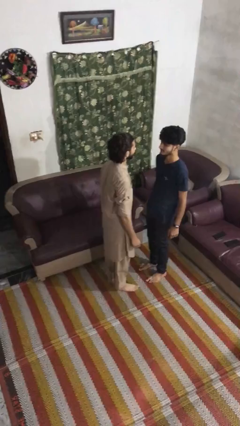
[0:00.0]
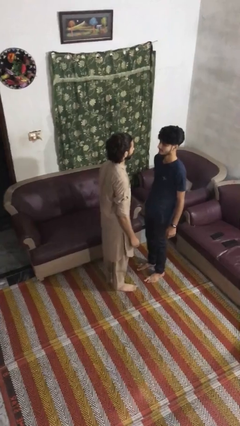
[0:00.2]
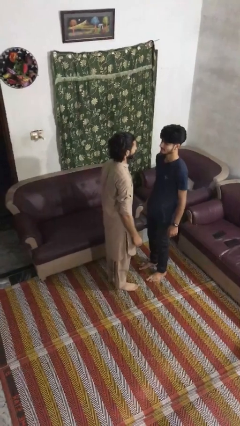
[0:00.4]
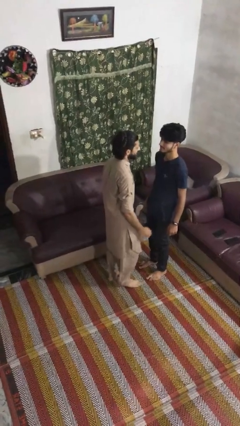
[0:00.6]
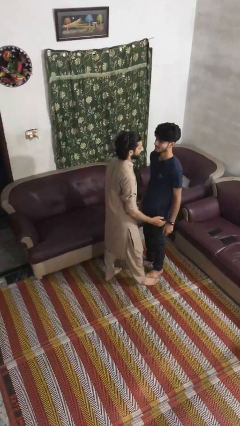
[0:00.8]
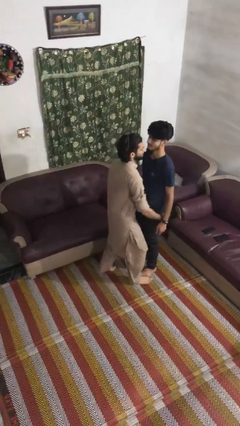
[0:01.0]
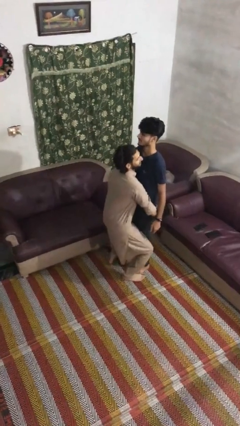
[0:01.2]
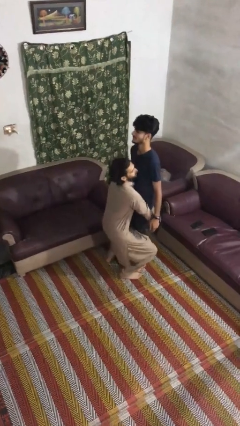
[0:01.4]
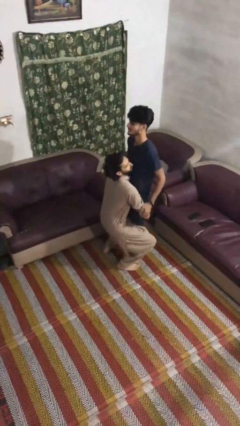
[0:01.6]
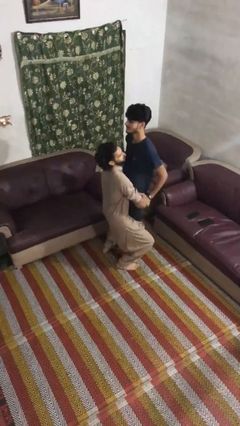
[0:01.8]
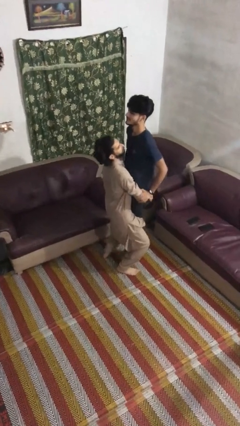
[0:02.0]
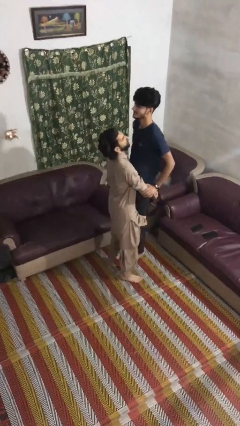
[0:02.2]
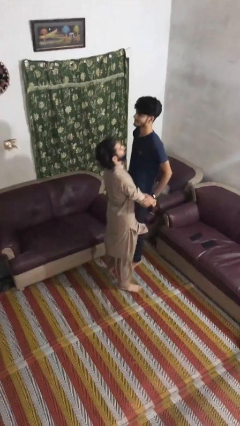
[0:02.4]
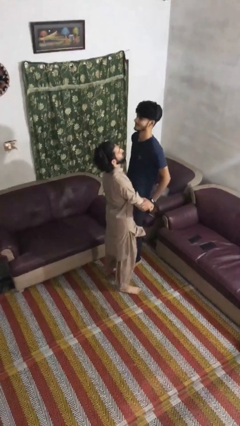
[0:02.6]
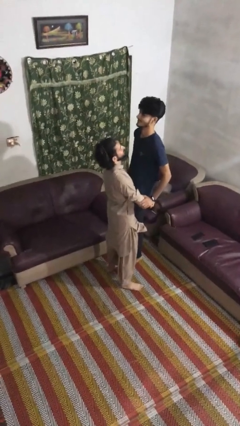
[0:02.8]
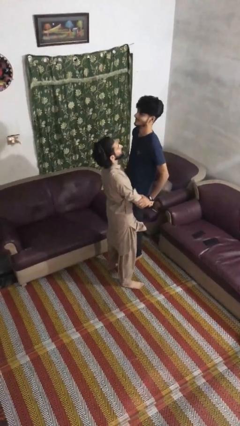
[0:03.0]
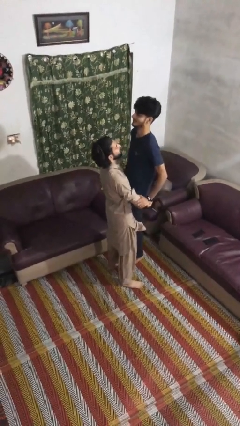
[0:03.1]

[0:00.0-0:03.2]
person picks up person

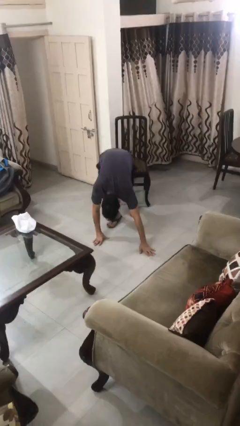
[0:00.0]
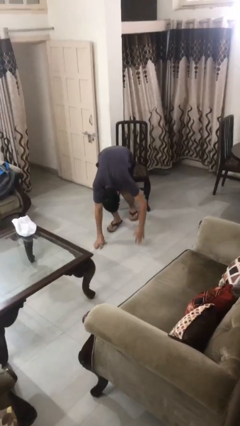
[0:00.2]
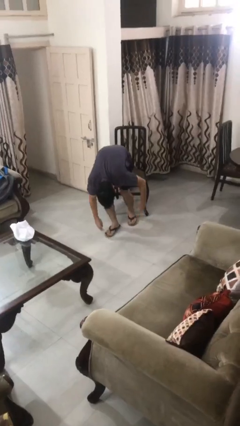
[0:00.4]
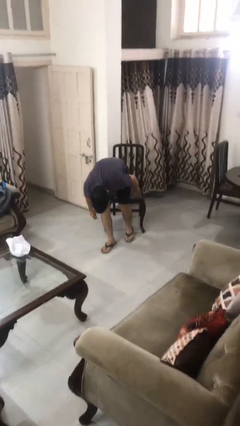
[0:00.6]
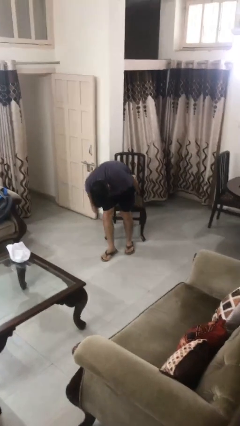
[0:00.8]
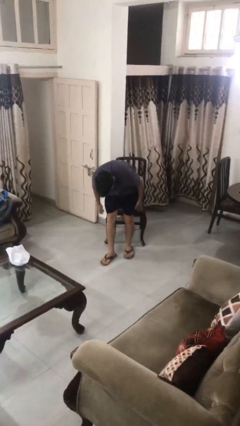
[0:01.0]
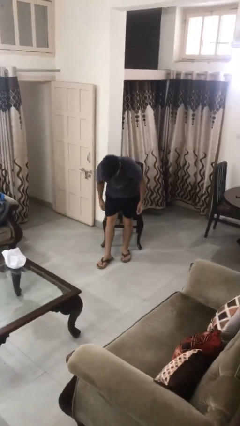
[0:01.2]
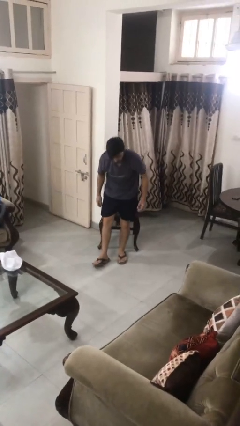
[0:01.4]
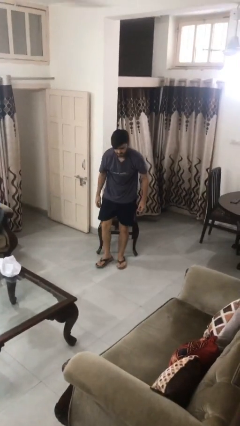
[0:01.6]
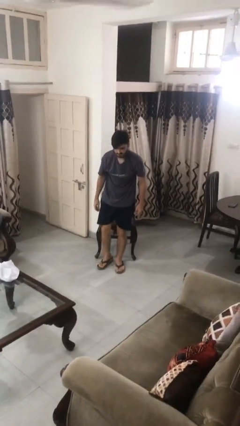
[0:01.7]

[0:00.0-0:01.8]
person stands up from floor

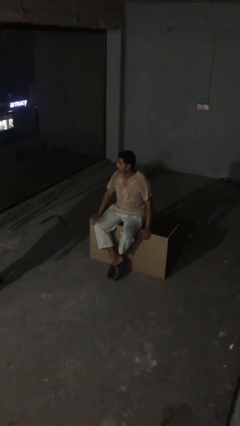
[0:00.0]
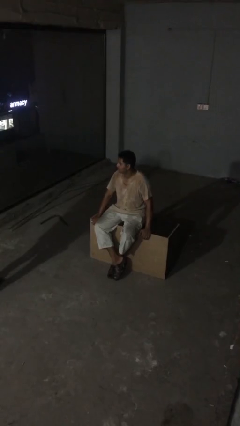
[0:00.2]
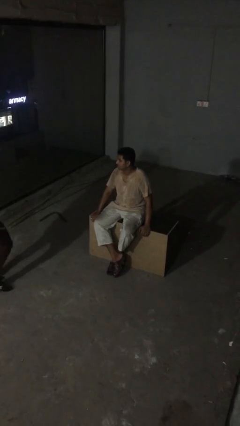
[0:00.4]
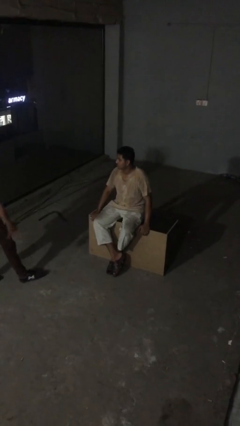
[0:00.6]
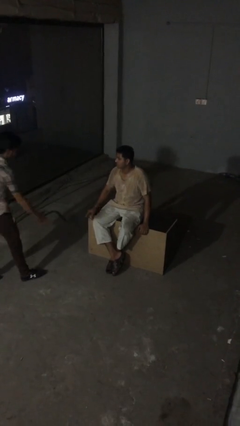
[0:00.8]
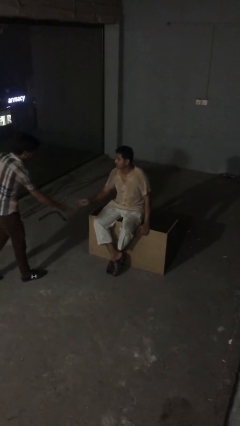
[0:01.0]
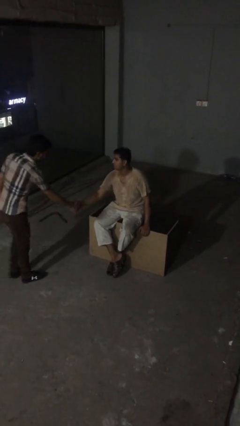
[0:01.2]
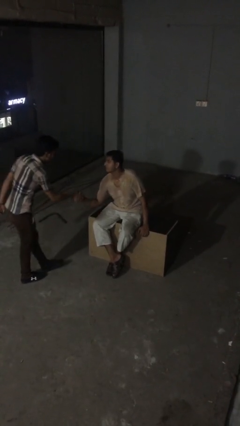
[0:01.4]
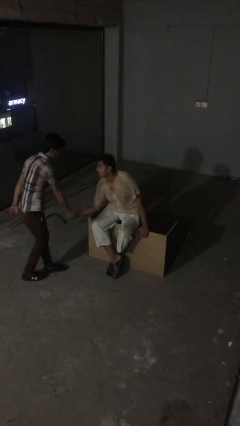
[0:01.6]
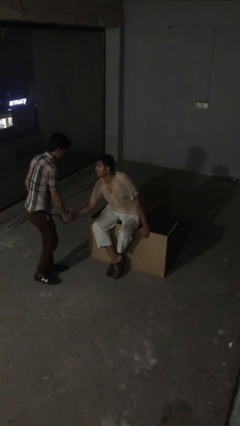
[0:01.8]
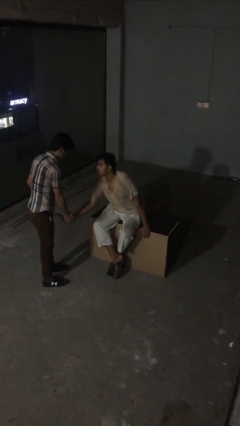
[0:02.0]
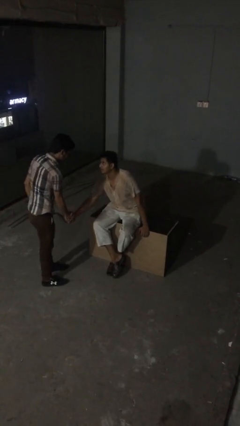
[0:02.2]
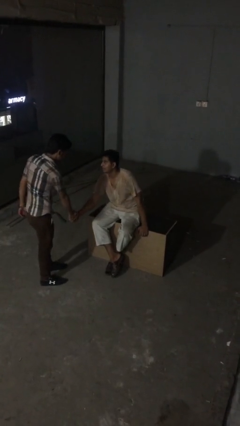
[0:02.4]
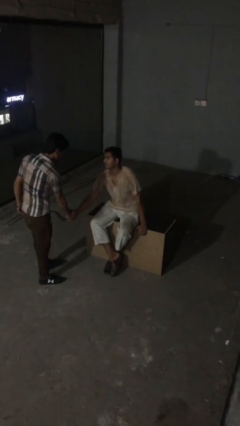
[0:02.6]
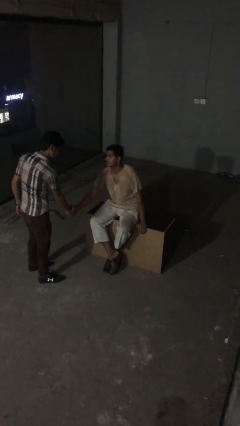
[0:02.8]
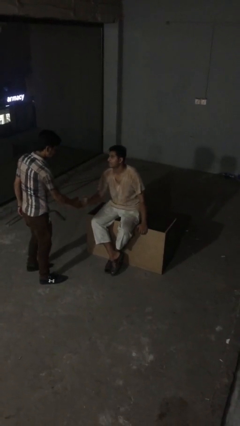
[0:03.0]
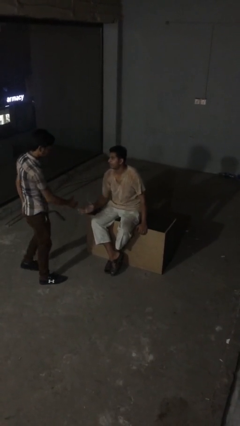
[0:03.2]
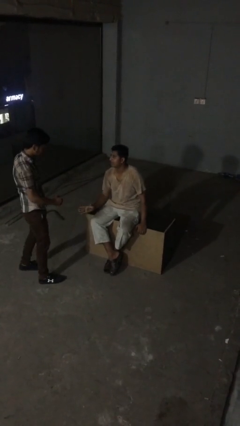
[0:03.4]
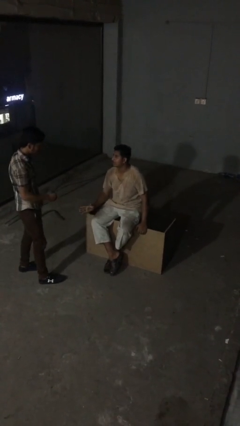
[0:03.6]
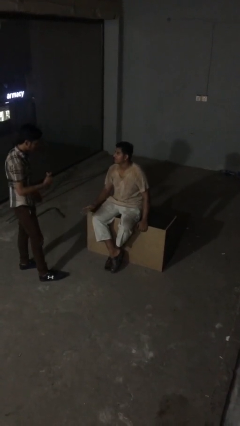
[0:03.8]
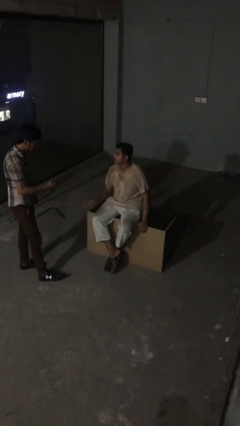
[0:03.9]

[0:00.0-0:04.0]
person shakes hand

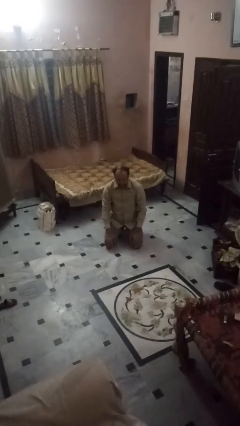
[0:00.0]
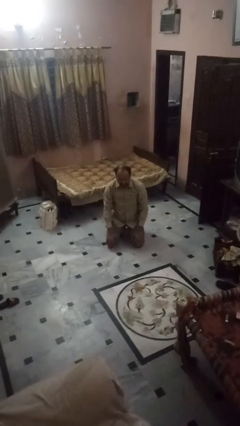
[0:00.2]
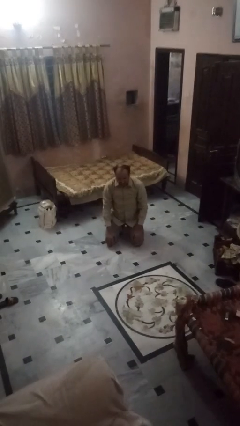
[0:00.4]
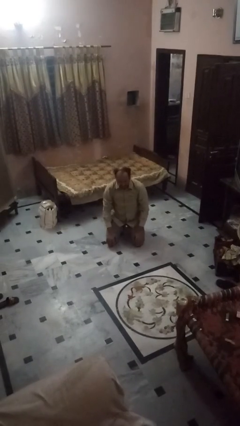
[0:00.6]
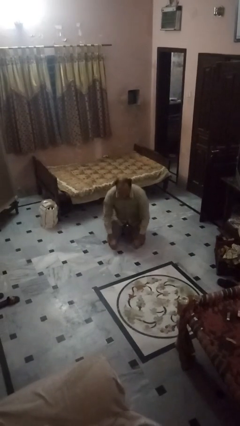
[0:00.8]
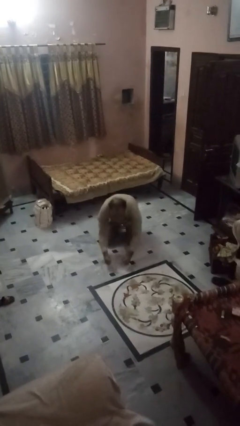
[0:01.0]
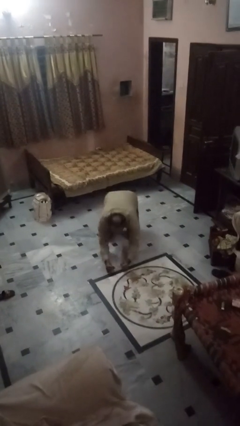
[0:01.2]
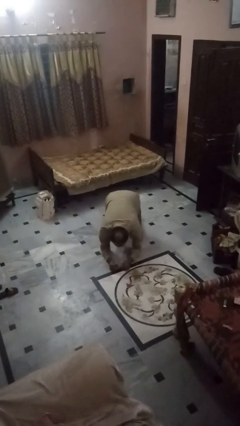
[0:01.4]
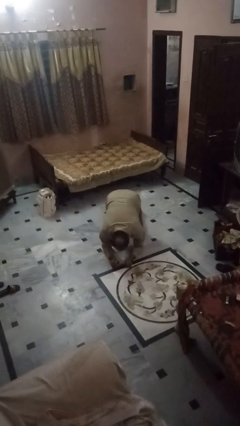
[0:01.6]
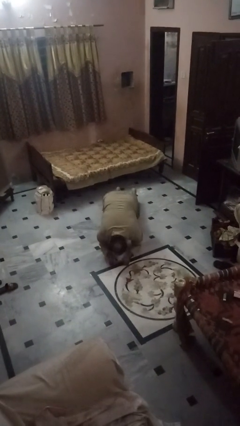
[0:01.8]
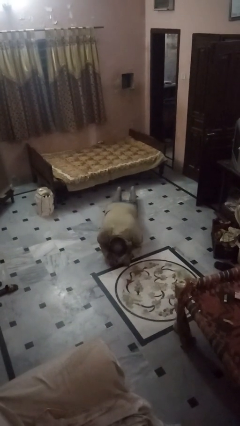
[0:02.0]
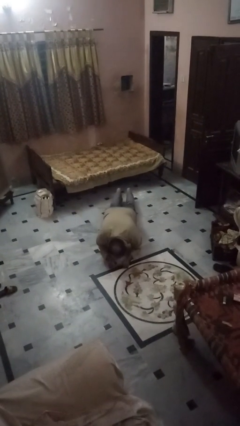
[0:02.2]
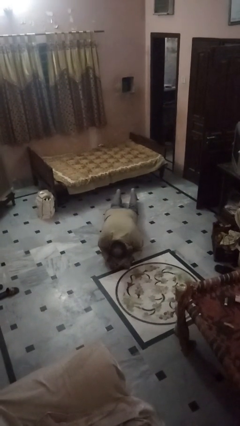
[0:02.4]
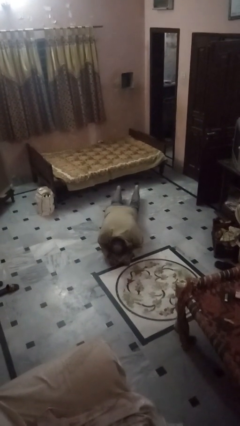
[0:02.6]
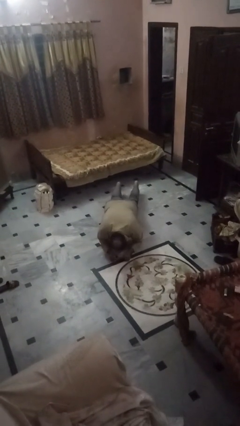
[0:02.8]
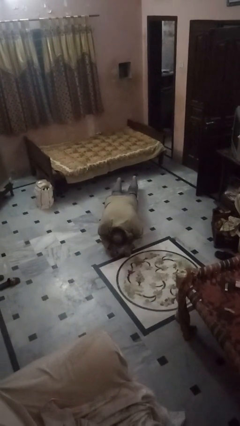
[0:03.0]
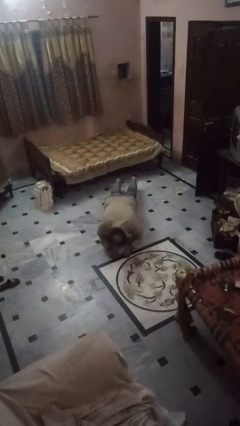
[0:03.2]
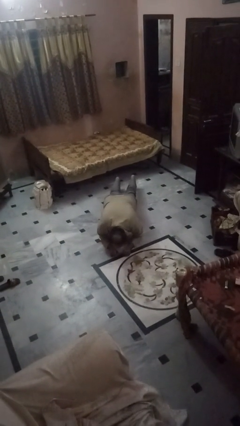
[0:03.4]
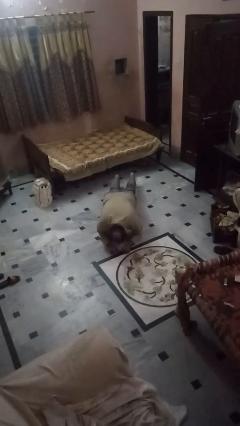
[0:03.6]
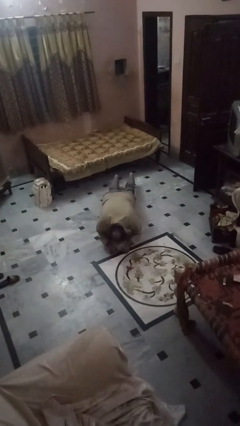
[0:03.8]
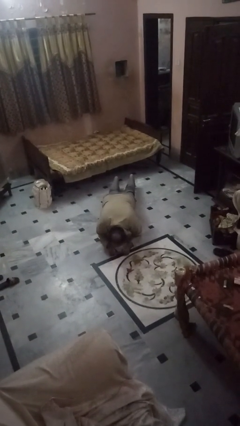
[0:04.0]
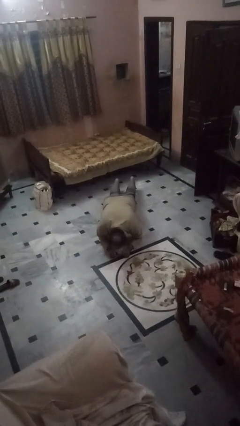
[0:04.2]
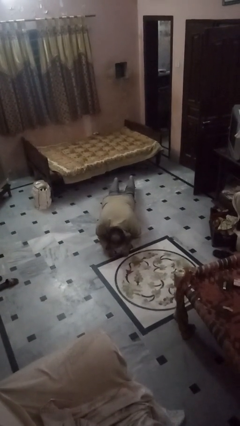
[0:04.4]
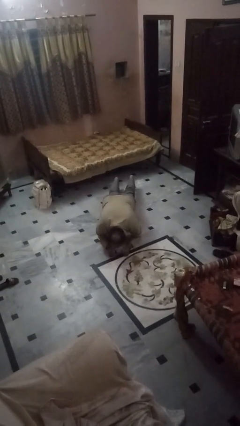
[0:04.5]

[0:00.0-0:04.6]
person exercises with plank

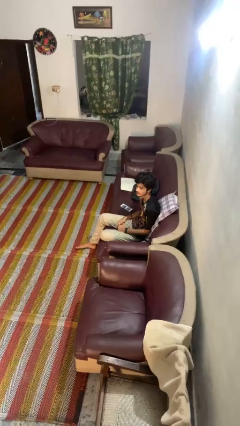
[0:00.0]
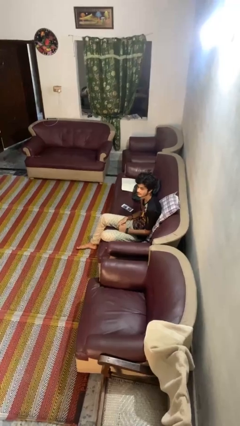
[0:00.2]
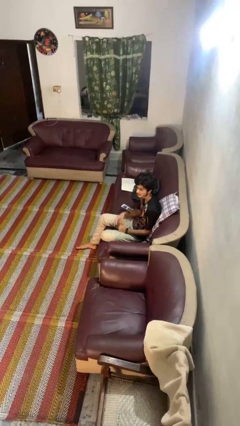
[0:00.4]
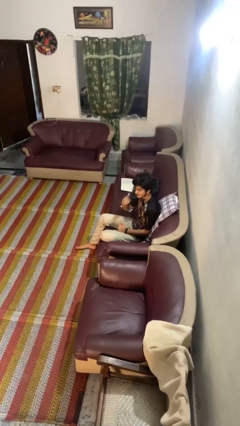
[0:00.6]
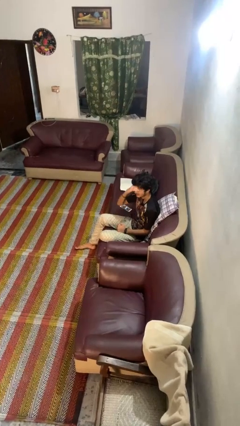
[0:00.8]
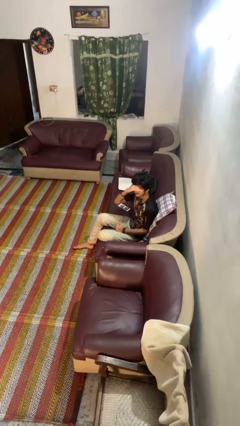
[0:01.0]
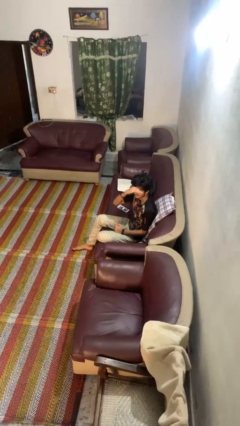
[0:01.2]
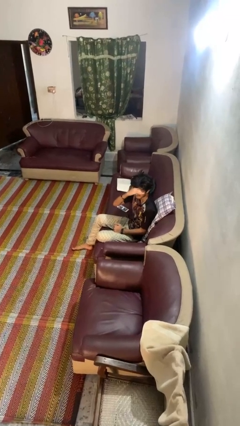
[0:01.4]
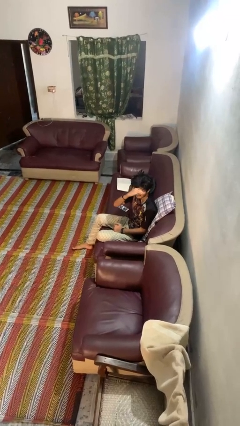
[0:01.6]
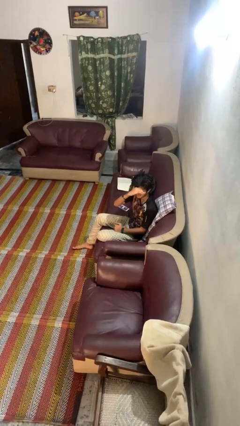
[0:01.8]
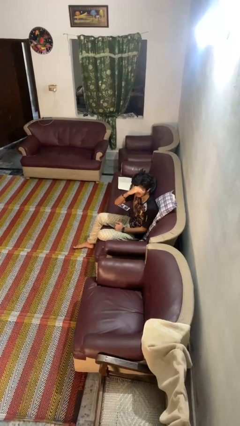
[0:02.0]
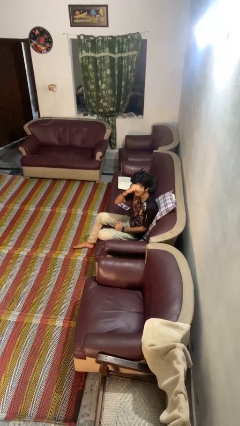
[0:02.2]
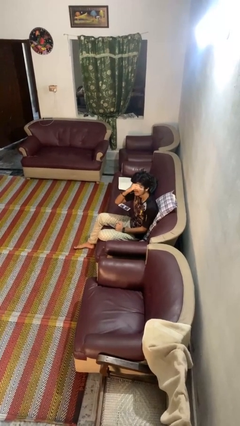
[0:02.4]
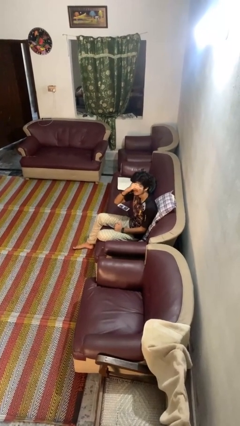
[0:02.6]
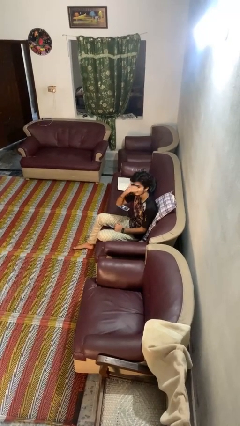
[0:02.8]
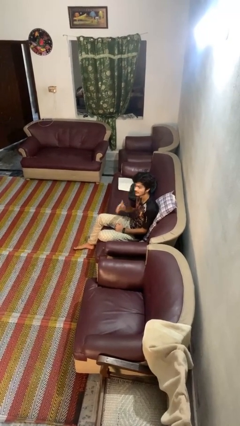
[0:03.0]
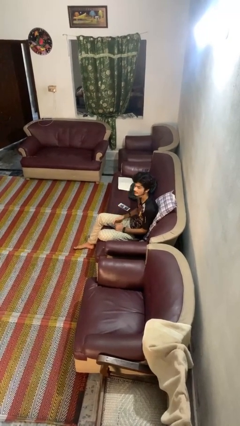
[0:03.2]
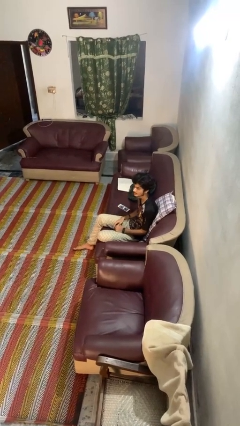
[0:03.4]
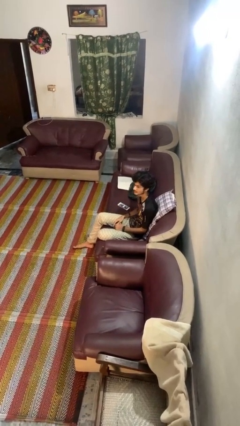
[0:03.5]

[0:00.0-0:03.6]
person shades eyes

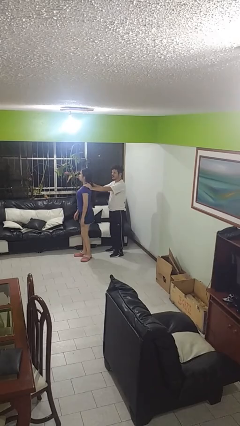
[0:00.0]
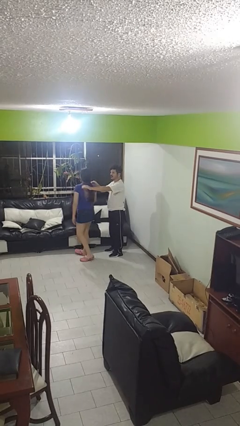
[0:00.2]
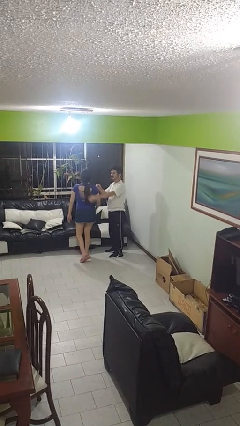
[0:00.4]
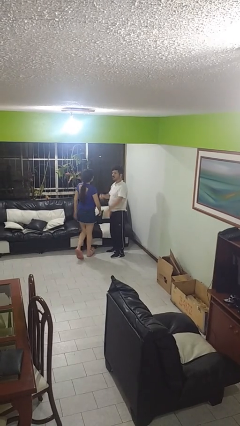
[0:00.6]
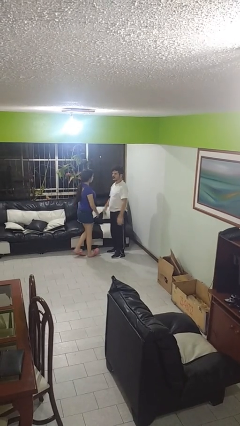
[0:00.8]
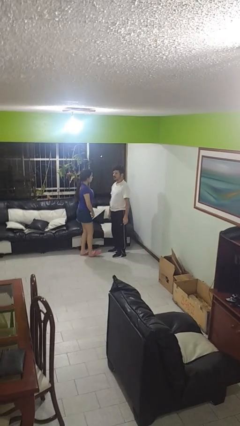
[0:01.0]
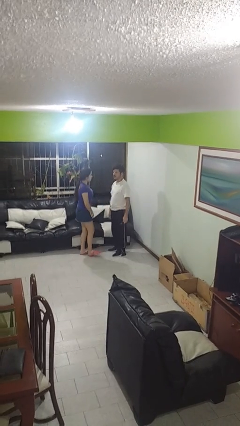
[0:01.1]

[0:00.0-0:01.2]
person spins person around
